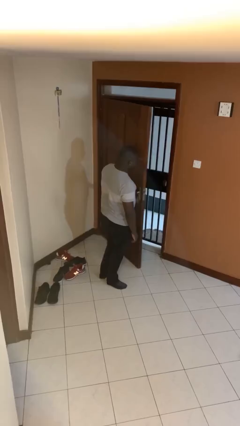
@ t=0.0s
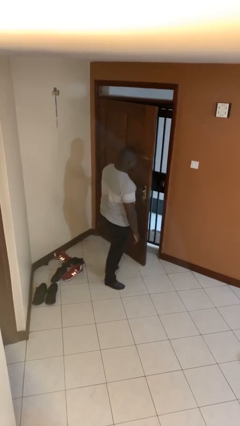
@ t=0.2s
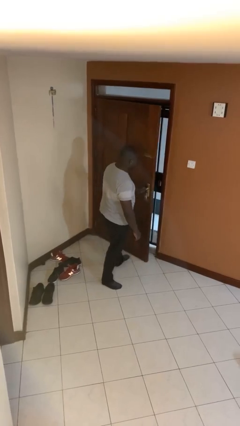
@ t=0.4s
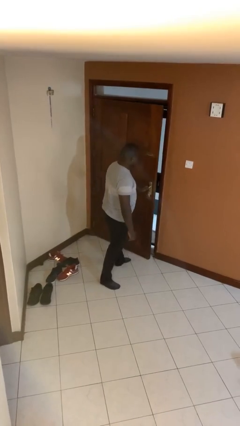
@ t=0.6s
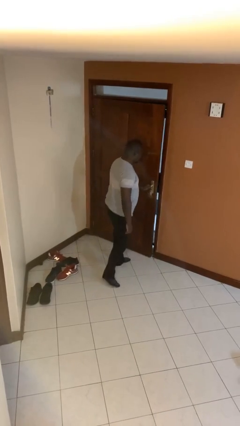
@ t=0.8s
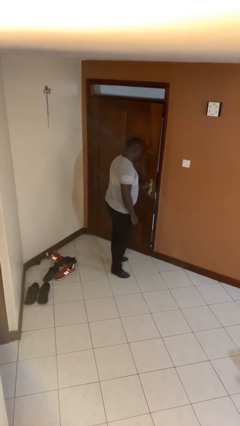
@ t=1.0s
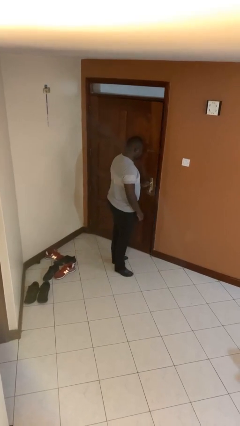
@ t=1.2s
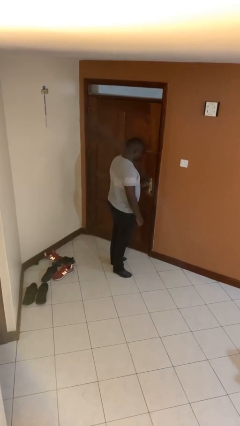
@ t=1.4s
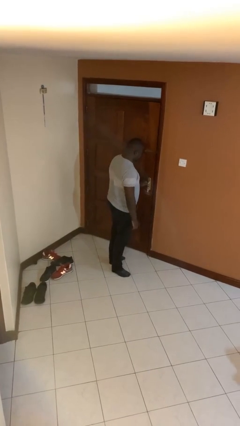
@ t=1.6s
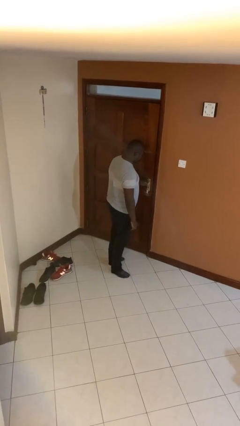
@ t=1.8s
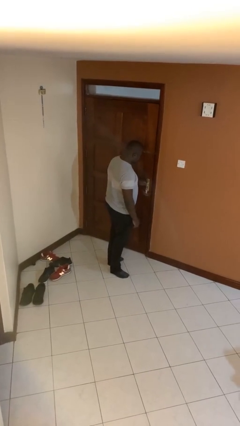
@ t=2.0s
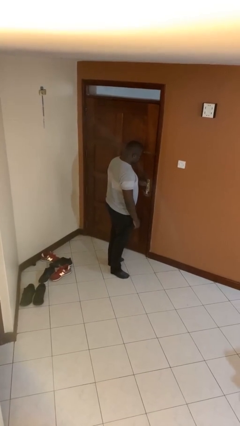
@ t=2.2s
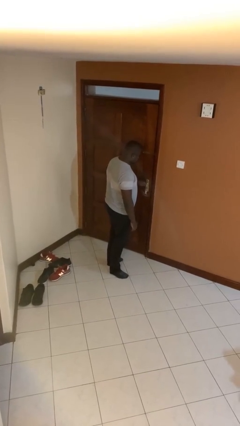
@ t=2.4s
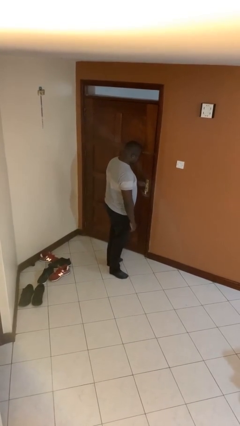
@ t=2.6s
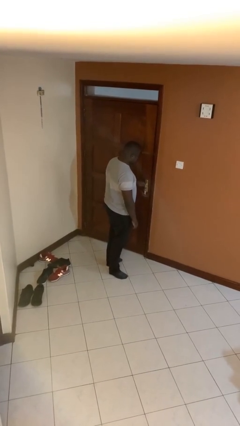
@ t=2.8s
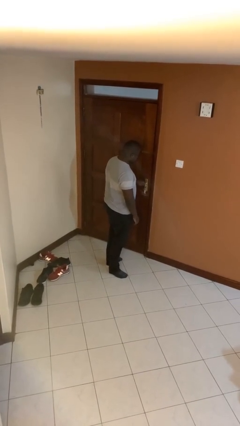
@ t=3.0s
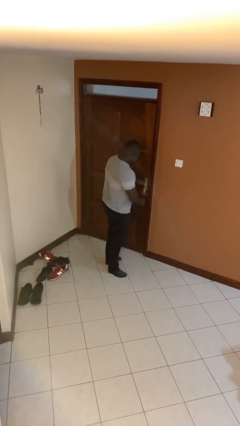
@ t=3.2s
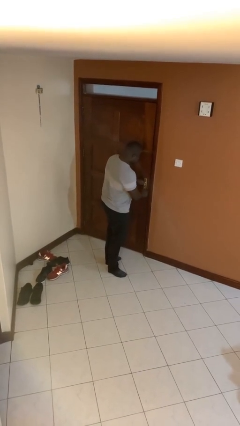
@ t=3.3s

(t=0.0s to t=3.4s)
person closes facility door

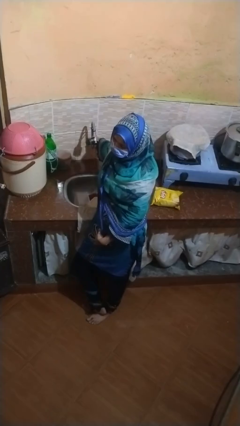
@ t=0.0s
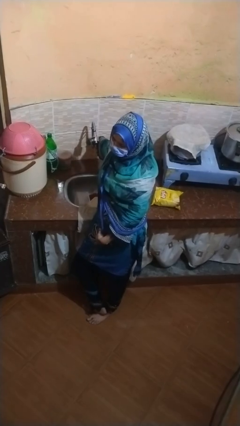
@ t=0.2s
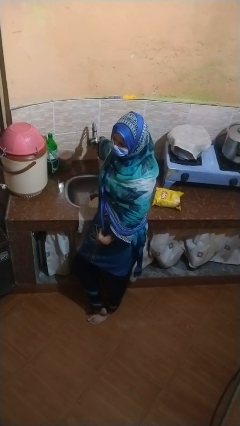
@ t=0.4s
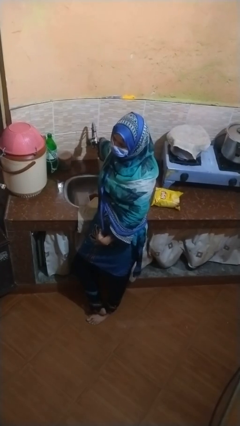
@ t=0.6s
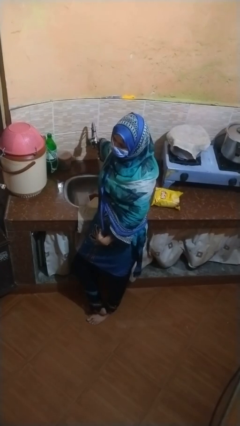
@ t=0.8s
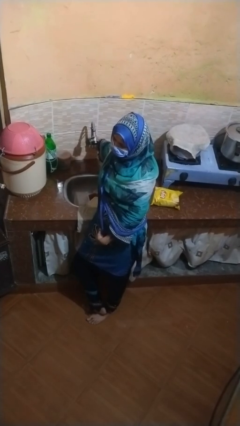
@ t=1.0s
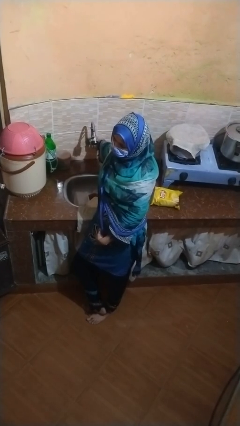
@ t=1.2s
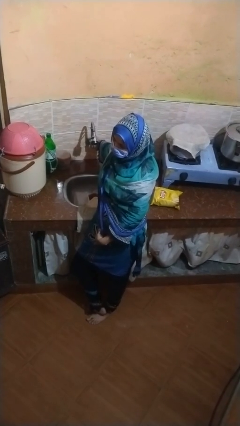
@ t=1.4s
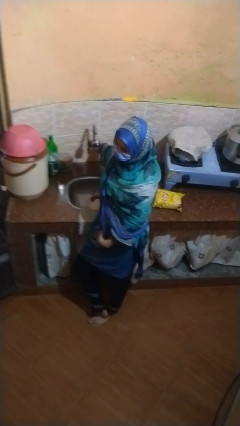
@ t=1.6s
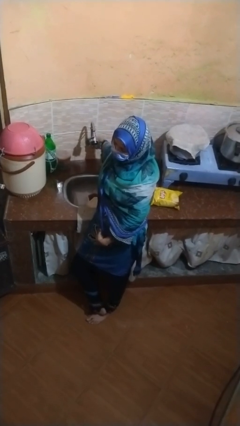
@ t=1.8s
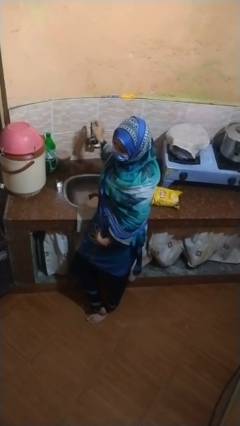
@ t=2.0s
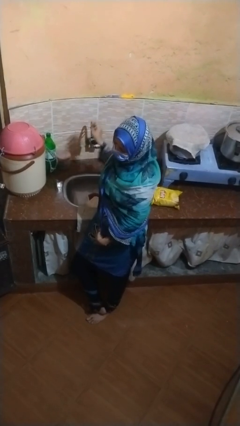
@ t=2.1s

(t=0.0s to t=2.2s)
person turns off faucet

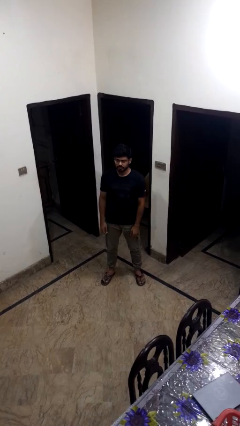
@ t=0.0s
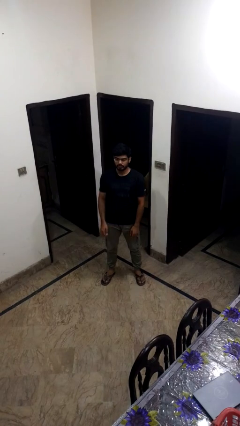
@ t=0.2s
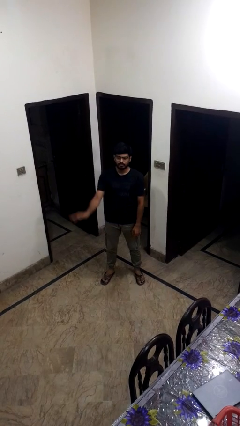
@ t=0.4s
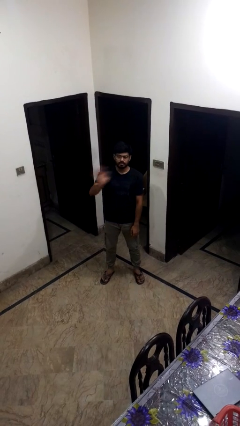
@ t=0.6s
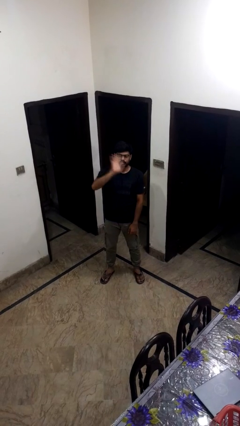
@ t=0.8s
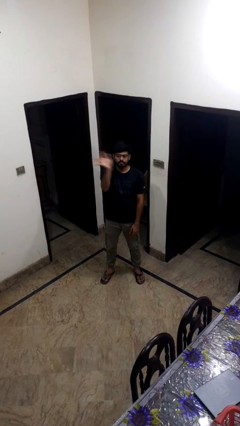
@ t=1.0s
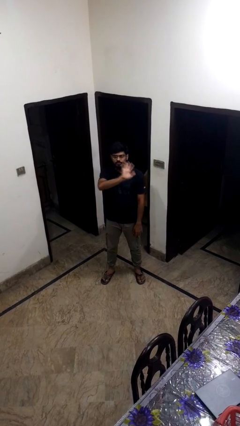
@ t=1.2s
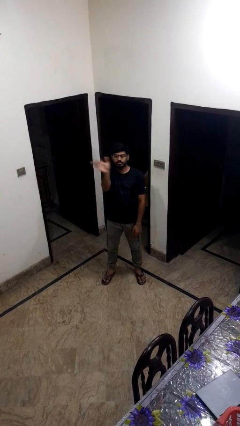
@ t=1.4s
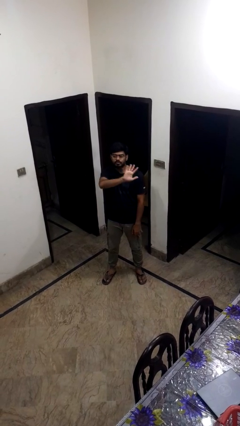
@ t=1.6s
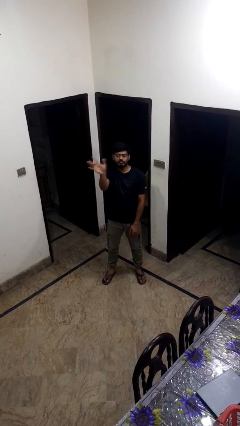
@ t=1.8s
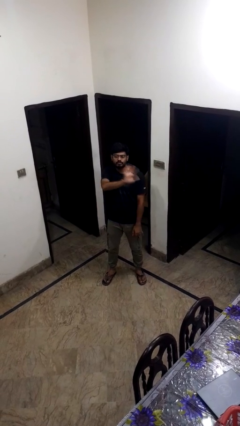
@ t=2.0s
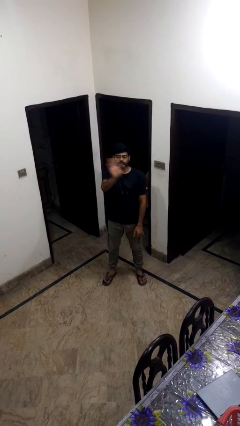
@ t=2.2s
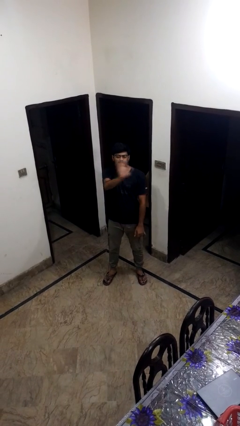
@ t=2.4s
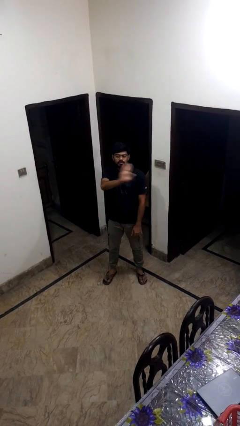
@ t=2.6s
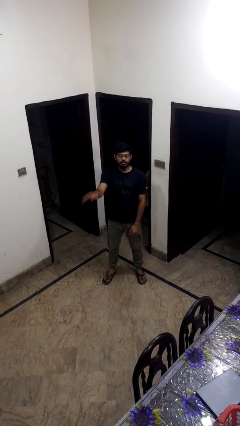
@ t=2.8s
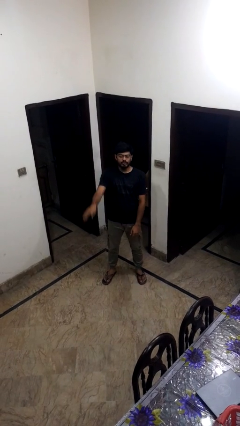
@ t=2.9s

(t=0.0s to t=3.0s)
person waves at person

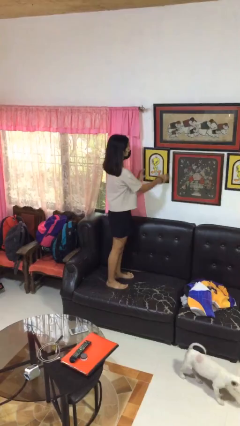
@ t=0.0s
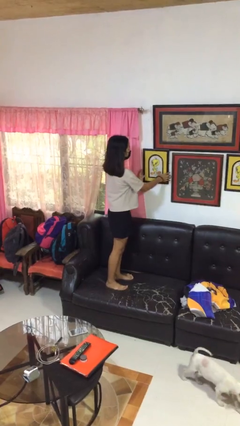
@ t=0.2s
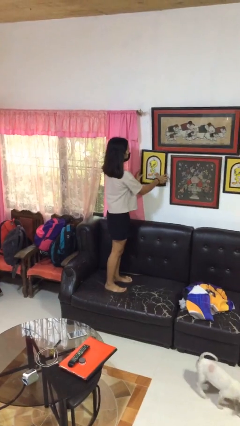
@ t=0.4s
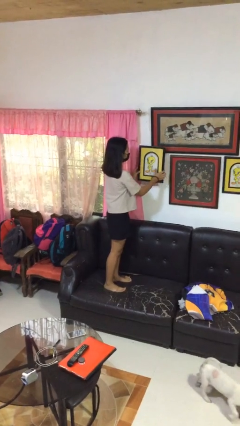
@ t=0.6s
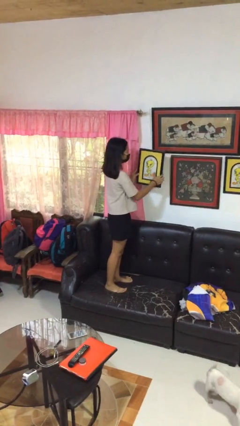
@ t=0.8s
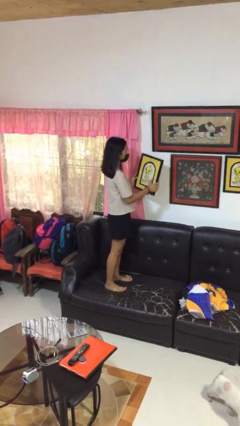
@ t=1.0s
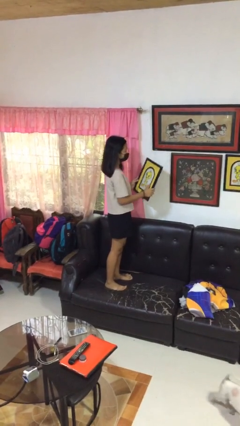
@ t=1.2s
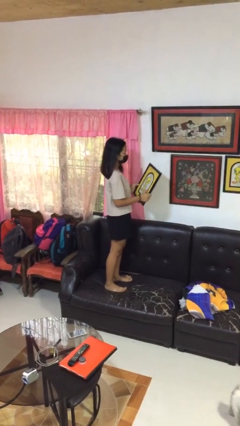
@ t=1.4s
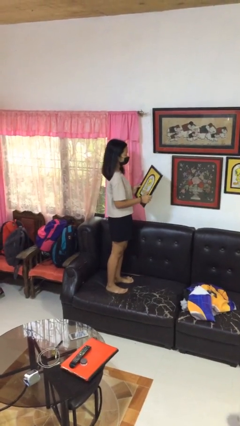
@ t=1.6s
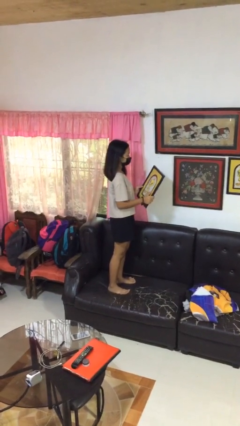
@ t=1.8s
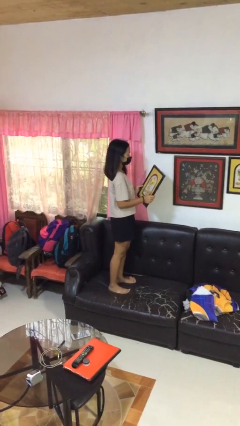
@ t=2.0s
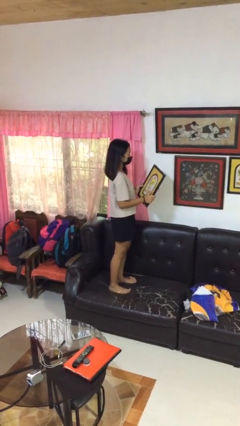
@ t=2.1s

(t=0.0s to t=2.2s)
person takes down picture frame

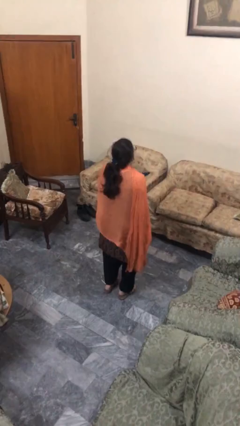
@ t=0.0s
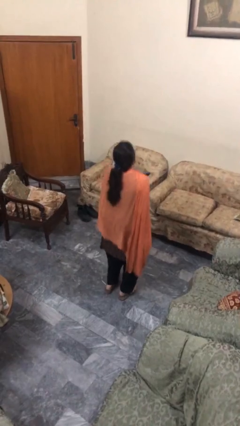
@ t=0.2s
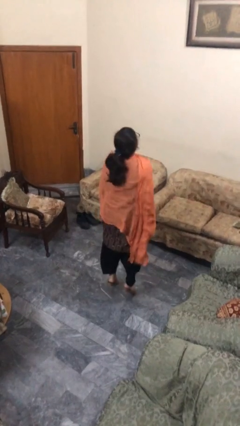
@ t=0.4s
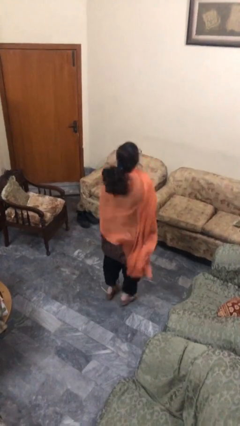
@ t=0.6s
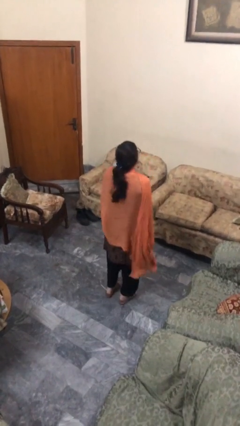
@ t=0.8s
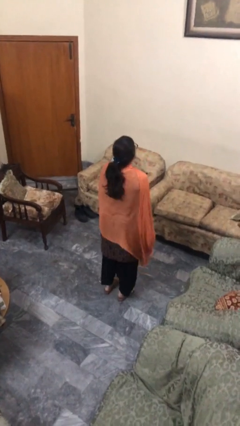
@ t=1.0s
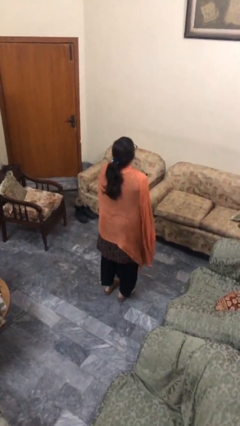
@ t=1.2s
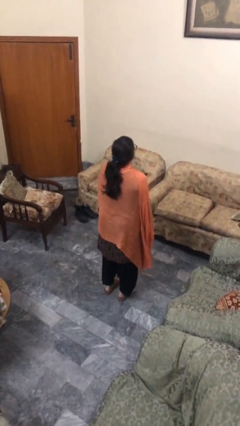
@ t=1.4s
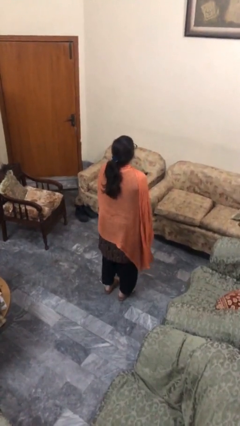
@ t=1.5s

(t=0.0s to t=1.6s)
person jumps

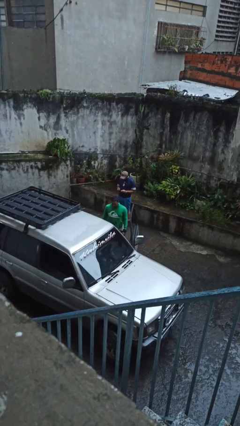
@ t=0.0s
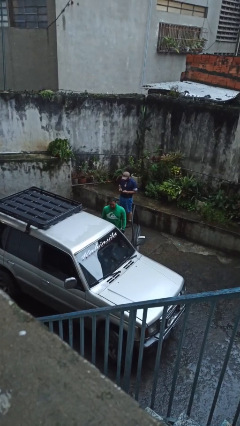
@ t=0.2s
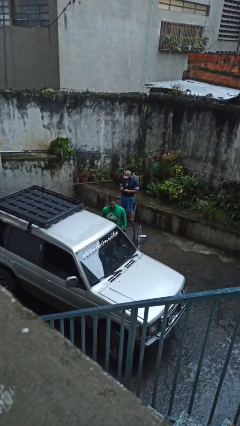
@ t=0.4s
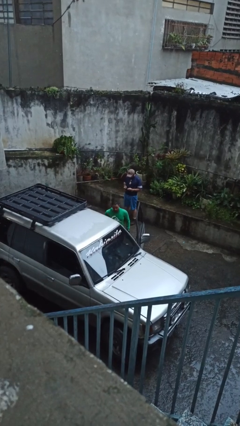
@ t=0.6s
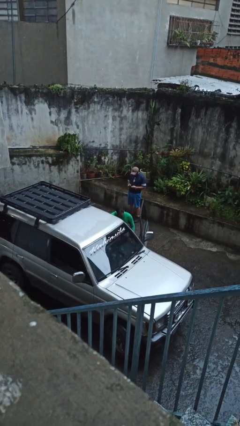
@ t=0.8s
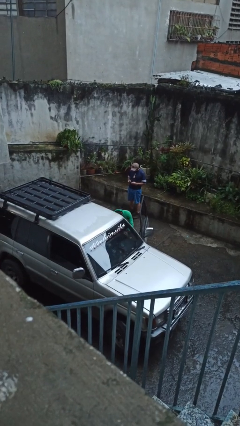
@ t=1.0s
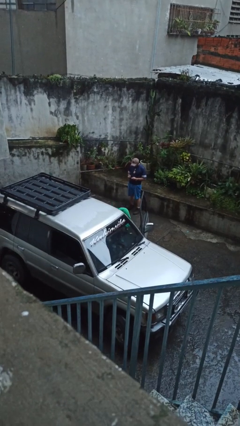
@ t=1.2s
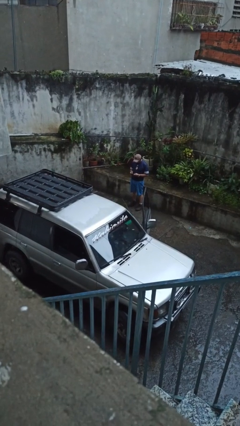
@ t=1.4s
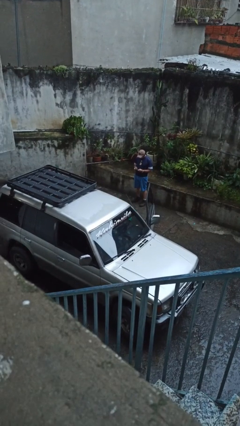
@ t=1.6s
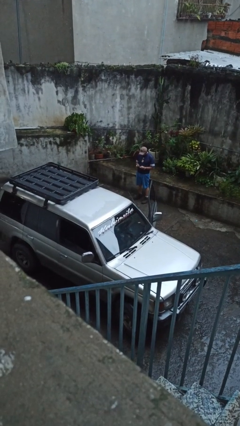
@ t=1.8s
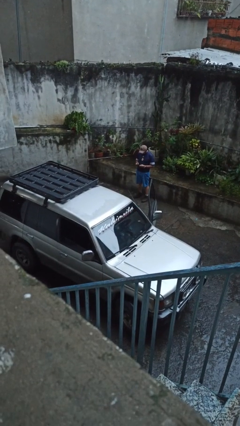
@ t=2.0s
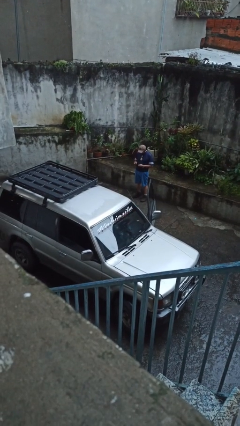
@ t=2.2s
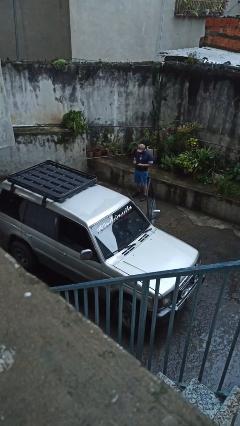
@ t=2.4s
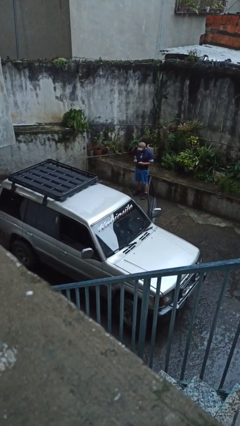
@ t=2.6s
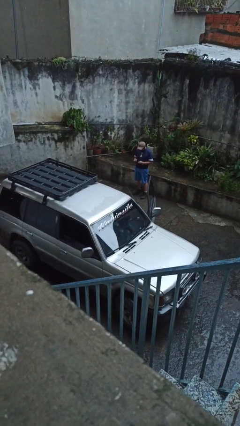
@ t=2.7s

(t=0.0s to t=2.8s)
person enters car

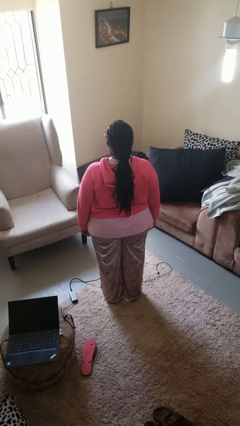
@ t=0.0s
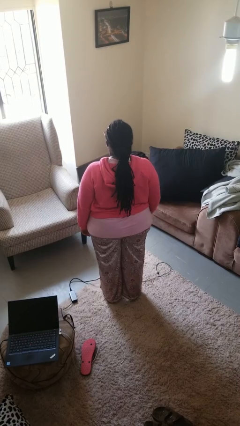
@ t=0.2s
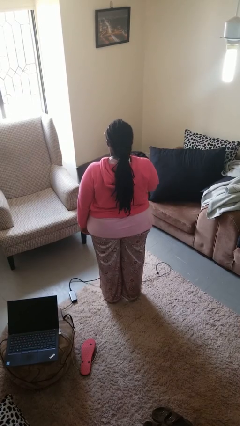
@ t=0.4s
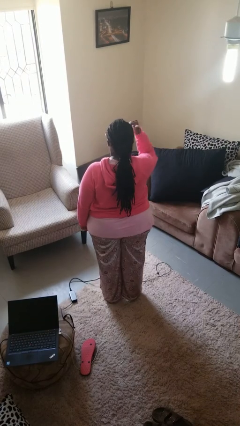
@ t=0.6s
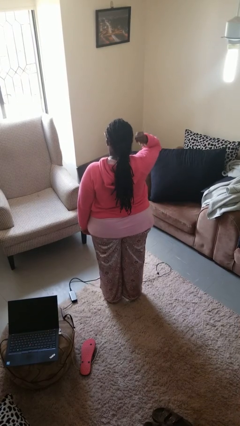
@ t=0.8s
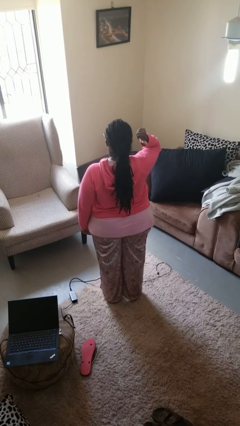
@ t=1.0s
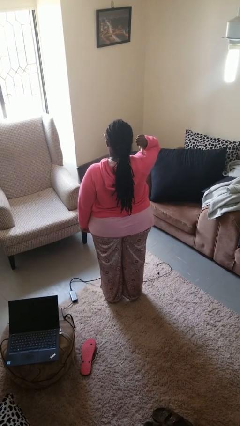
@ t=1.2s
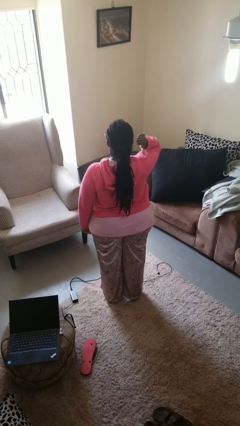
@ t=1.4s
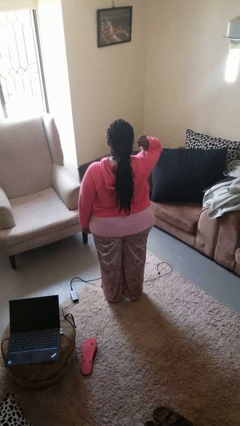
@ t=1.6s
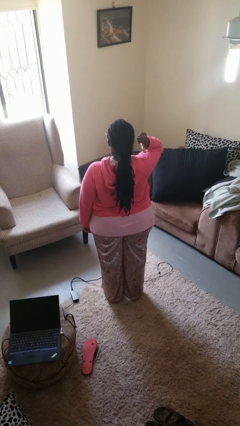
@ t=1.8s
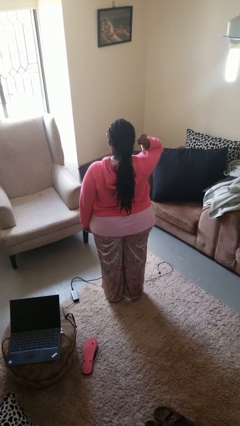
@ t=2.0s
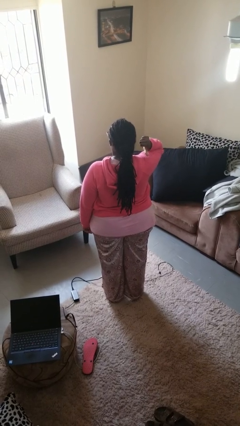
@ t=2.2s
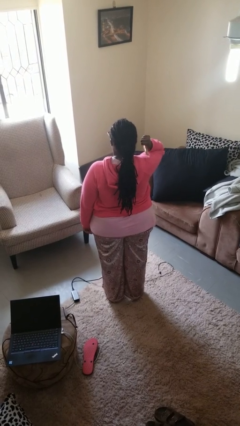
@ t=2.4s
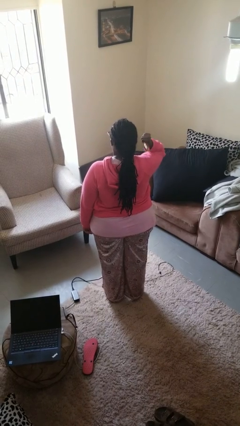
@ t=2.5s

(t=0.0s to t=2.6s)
person gestures behind me
